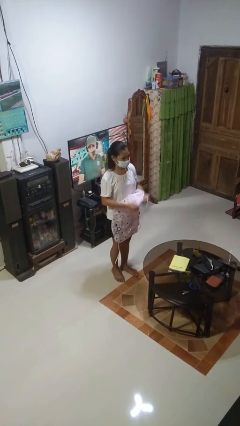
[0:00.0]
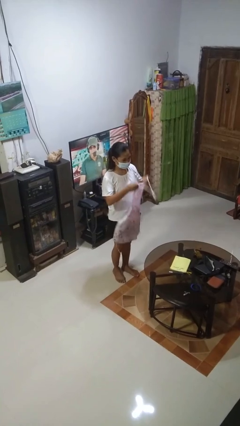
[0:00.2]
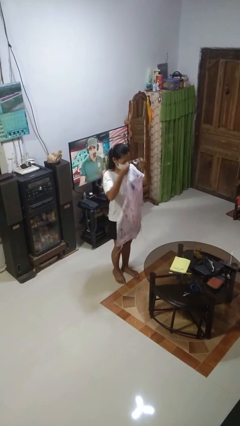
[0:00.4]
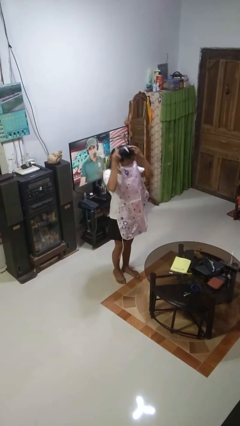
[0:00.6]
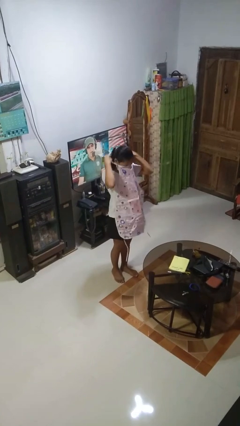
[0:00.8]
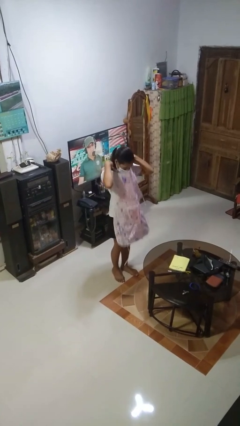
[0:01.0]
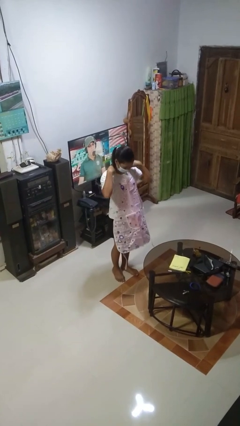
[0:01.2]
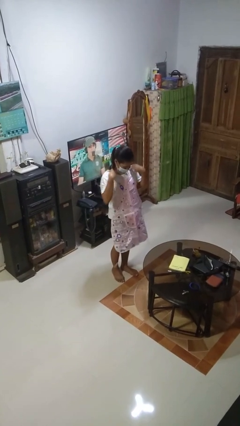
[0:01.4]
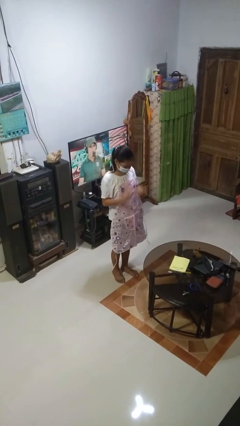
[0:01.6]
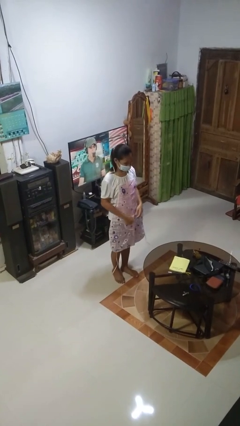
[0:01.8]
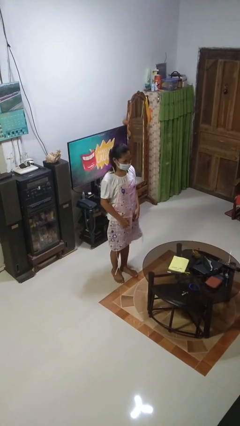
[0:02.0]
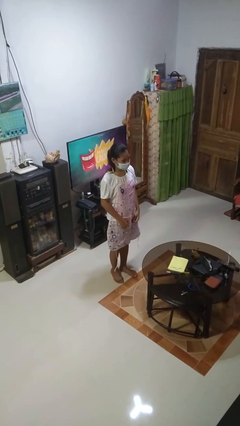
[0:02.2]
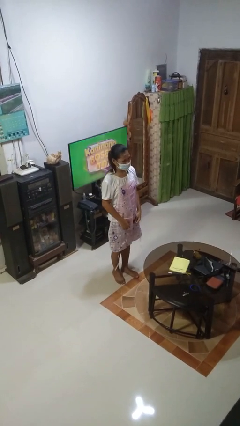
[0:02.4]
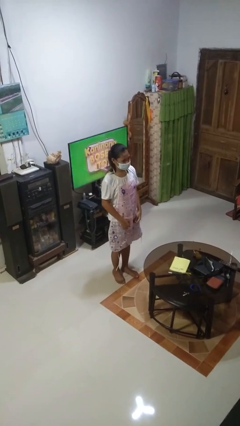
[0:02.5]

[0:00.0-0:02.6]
person puts on apron

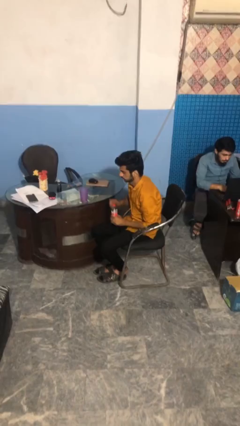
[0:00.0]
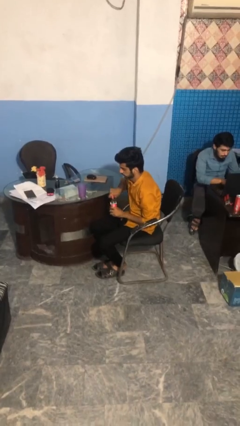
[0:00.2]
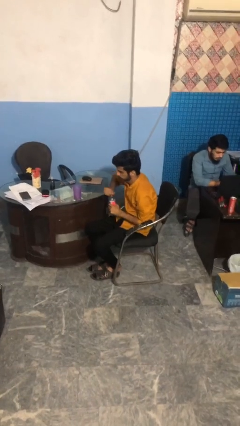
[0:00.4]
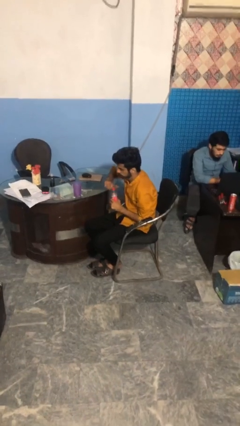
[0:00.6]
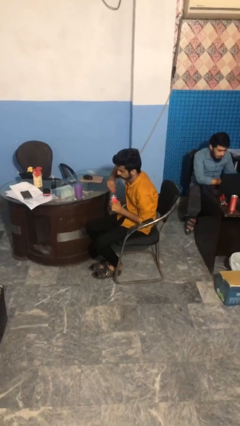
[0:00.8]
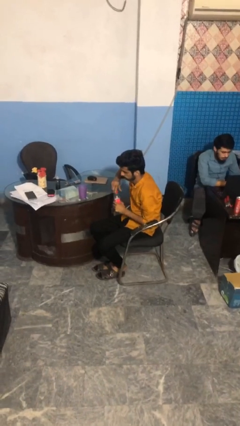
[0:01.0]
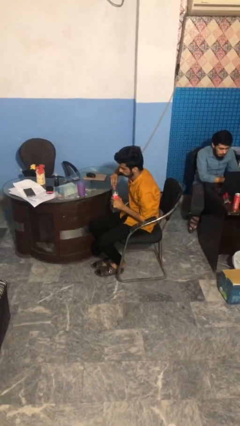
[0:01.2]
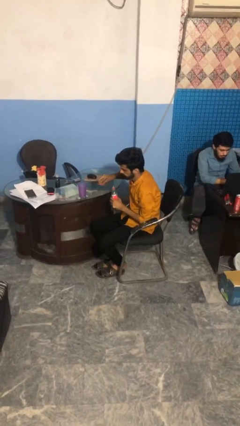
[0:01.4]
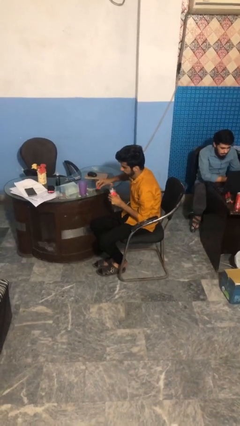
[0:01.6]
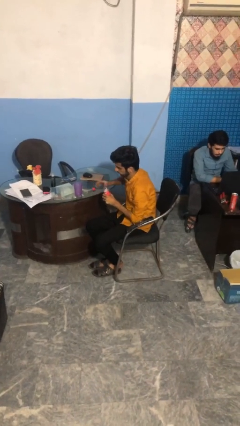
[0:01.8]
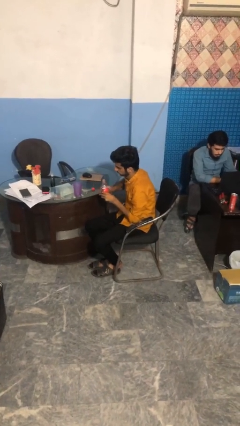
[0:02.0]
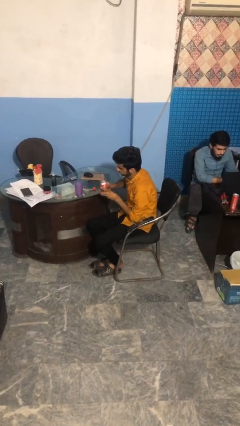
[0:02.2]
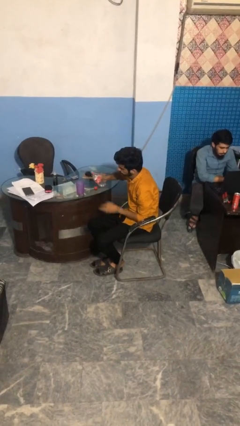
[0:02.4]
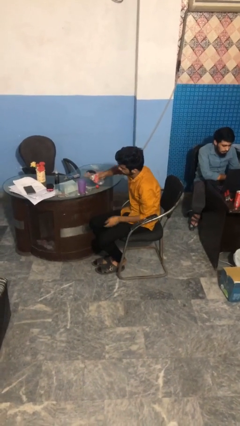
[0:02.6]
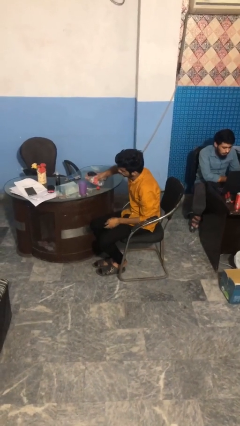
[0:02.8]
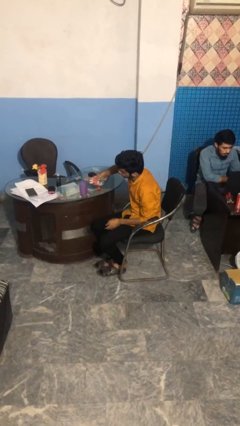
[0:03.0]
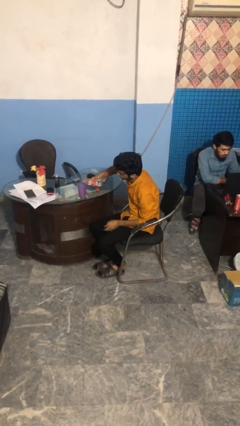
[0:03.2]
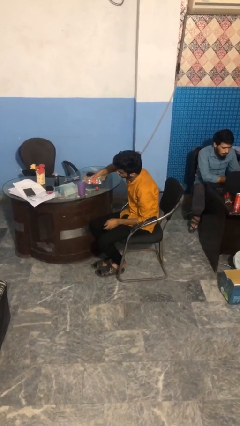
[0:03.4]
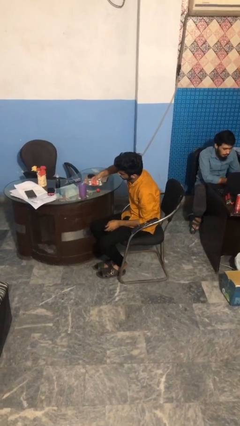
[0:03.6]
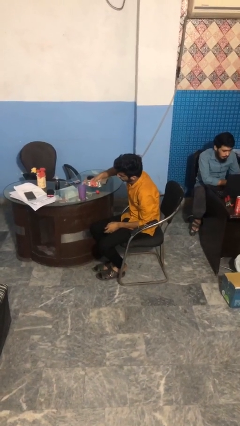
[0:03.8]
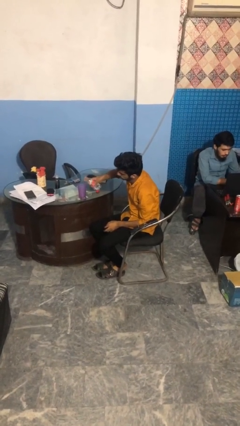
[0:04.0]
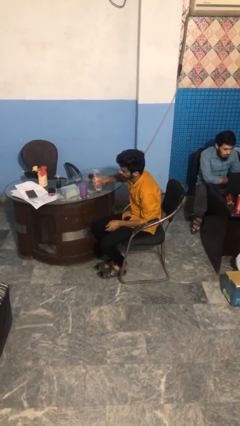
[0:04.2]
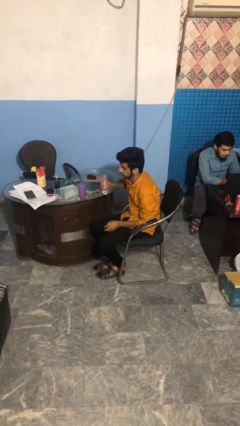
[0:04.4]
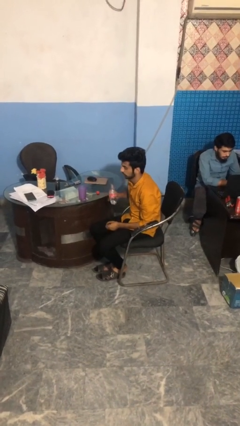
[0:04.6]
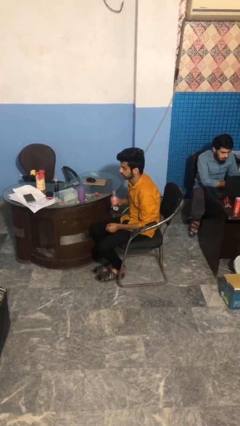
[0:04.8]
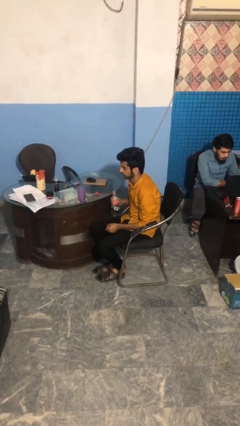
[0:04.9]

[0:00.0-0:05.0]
person pours liquid into cup

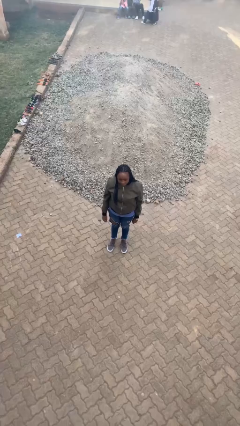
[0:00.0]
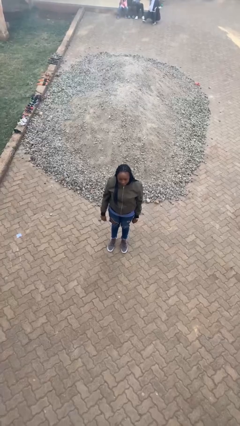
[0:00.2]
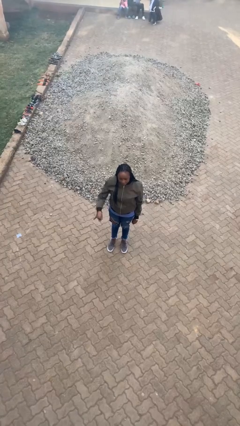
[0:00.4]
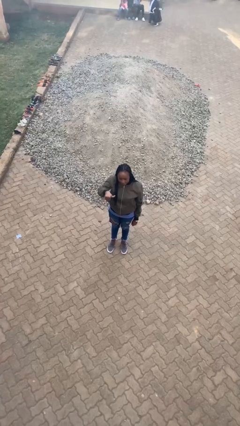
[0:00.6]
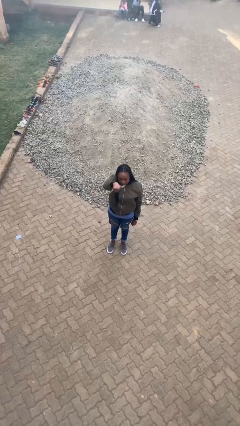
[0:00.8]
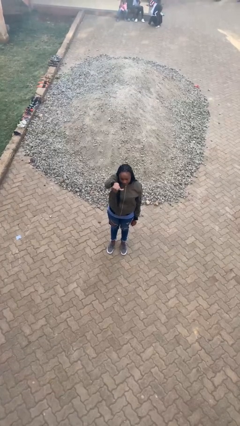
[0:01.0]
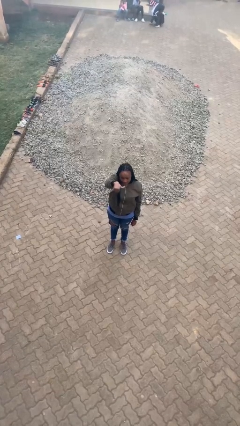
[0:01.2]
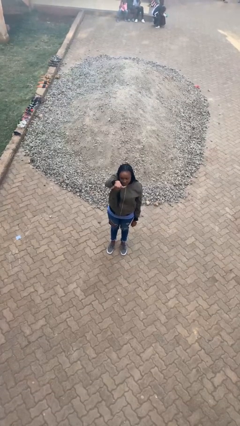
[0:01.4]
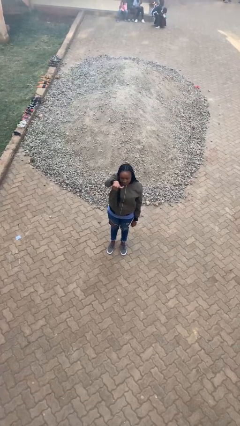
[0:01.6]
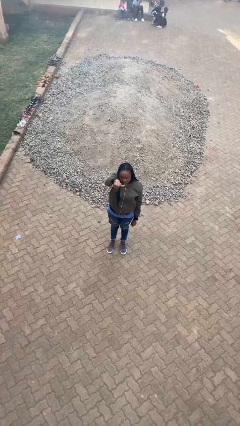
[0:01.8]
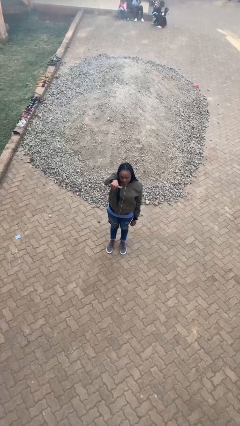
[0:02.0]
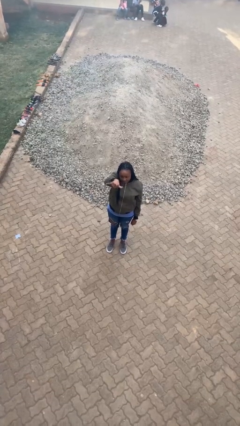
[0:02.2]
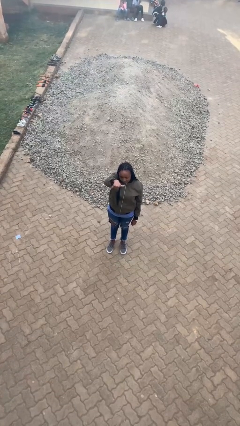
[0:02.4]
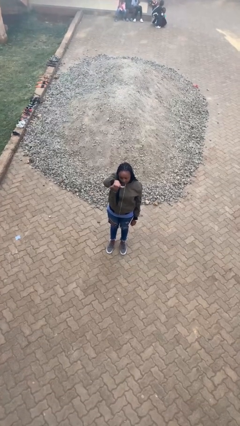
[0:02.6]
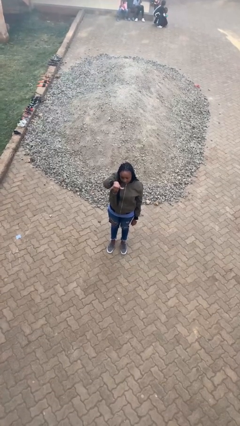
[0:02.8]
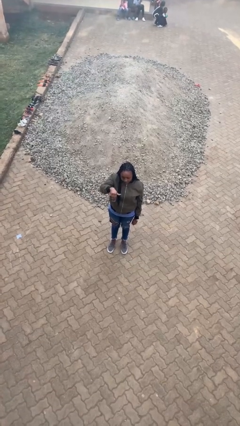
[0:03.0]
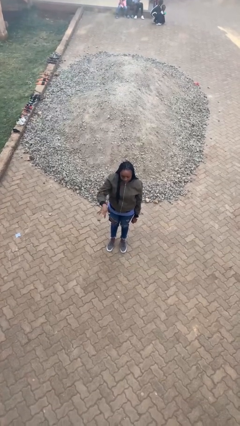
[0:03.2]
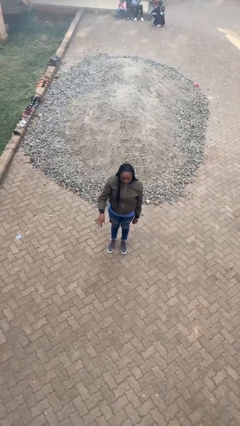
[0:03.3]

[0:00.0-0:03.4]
person gestures hang loose

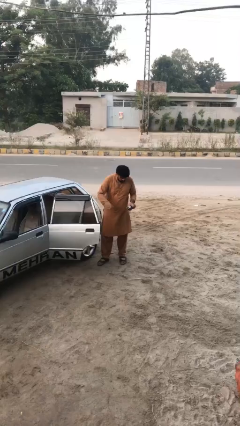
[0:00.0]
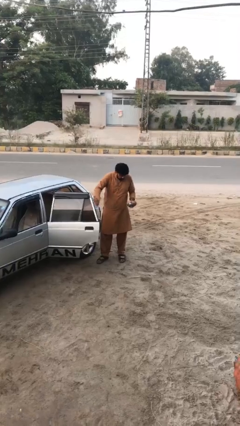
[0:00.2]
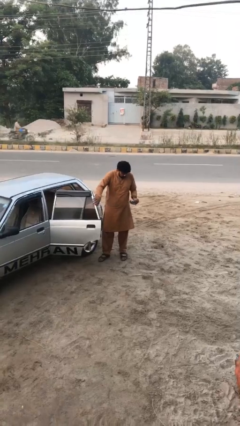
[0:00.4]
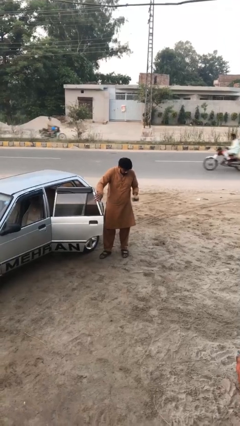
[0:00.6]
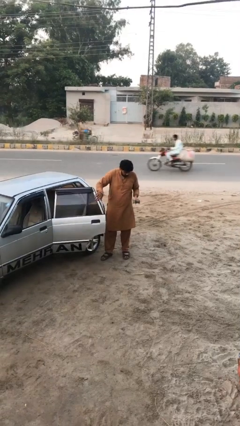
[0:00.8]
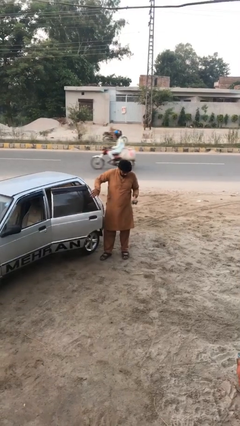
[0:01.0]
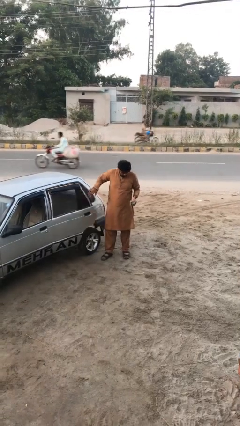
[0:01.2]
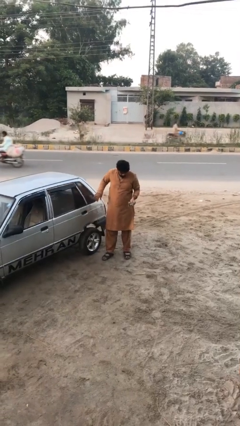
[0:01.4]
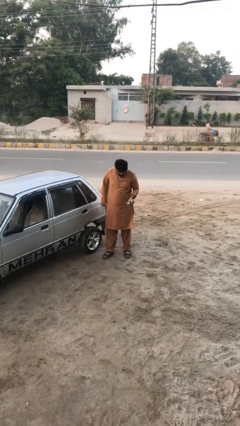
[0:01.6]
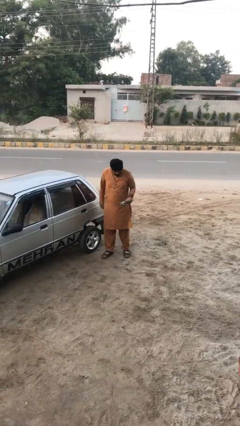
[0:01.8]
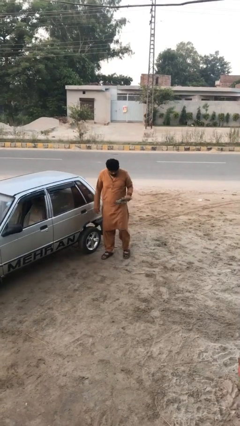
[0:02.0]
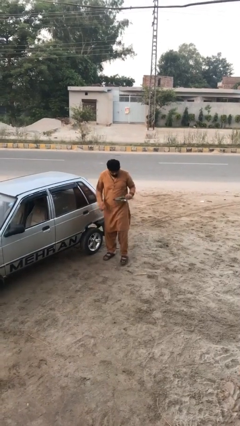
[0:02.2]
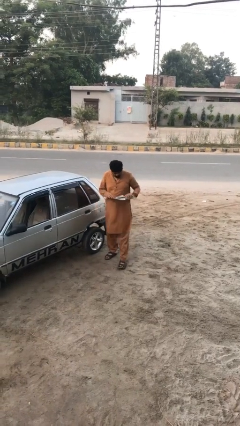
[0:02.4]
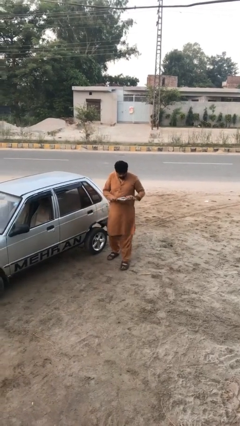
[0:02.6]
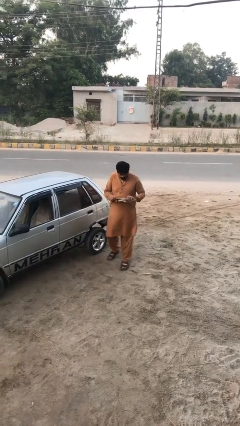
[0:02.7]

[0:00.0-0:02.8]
person closes car door

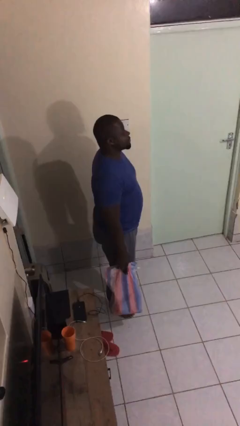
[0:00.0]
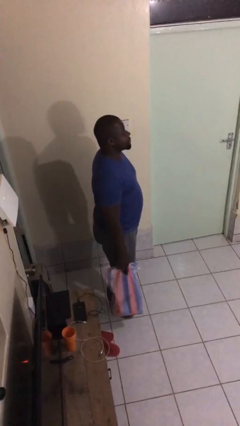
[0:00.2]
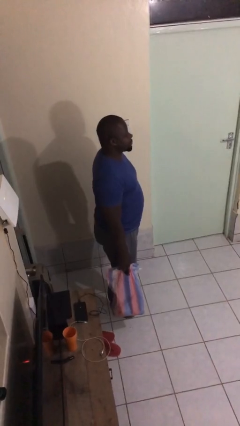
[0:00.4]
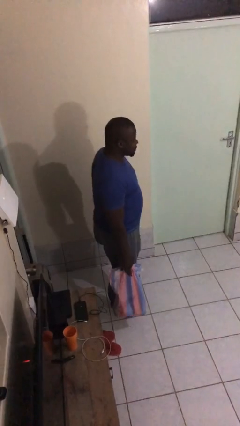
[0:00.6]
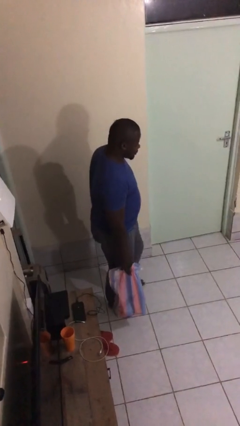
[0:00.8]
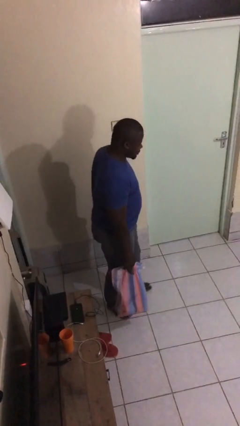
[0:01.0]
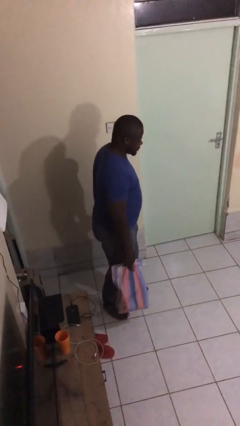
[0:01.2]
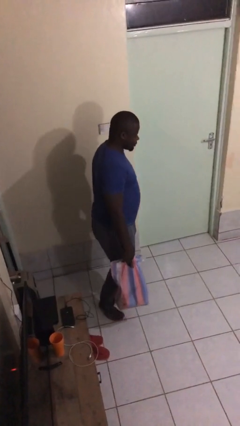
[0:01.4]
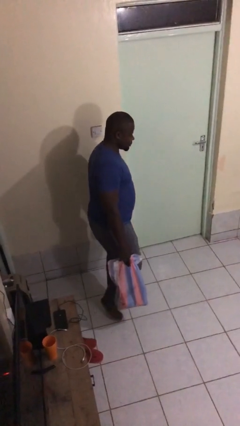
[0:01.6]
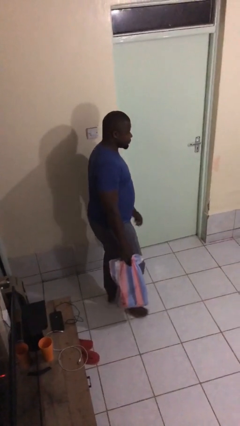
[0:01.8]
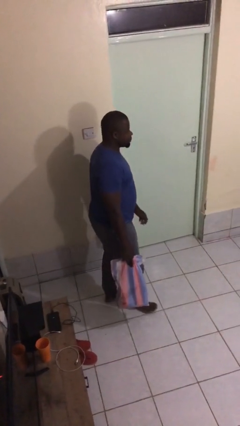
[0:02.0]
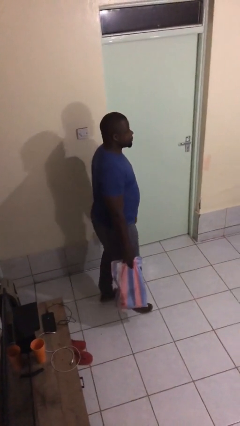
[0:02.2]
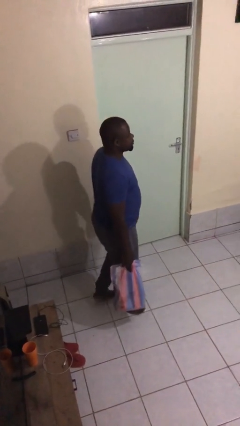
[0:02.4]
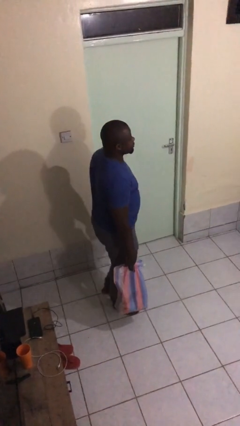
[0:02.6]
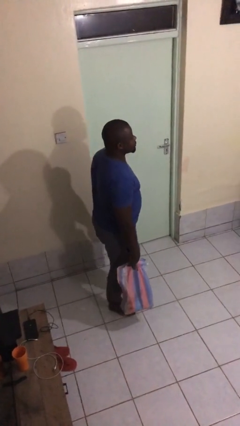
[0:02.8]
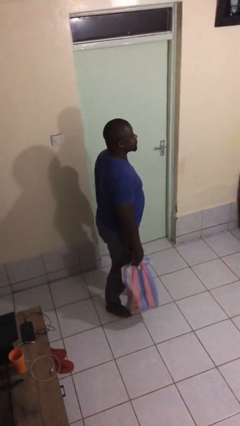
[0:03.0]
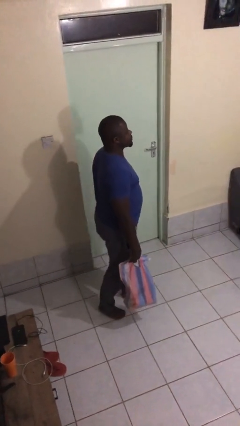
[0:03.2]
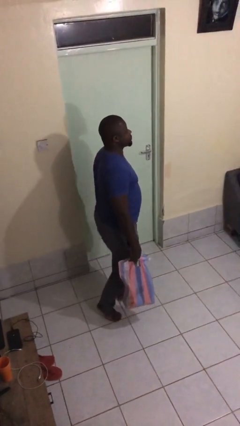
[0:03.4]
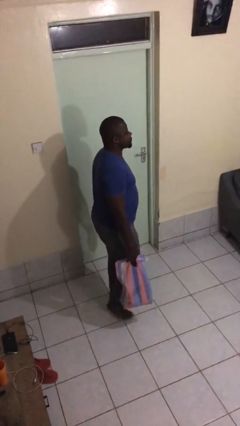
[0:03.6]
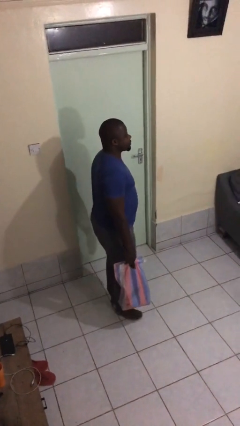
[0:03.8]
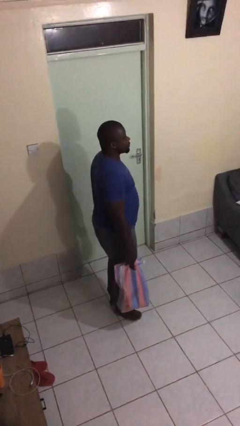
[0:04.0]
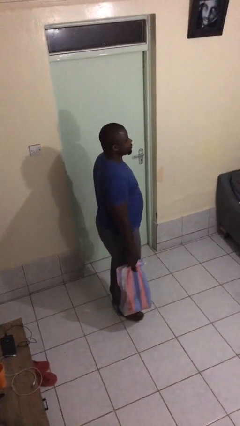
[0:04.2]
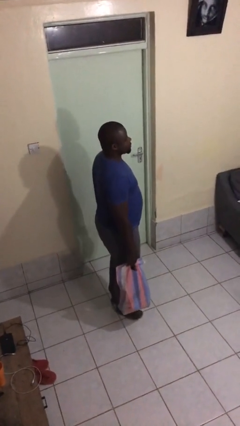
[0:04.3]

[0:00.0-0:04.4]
person carries groceries
